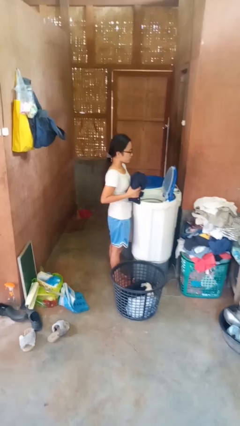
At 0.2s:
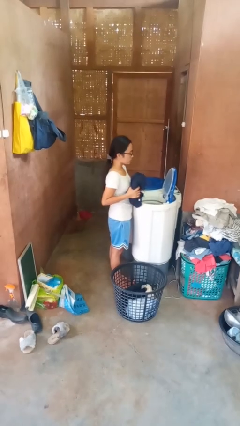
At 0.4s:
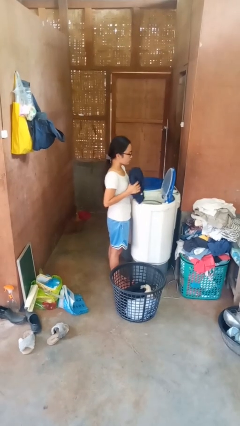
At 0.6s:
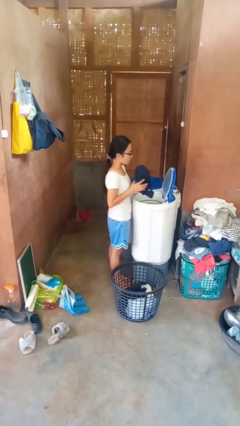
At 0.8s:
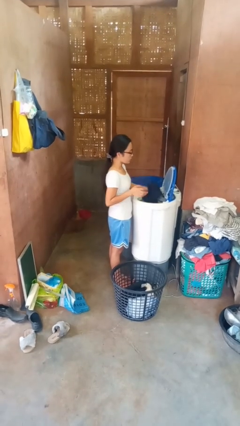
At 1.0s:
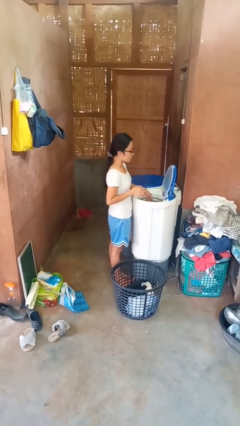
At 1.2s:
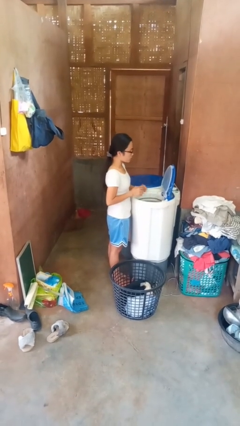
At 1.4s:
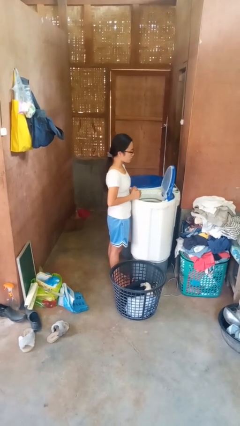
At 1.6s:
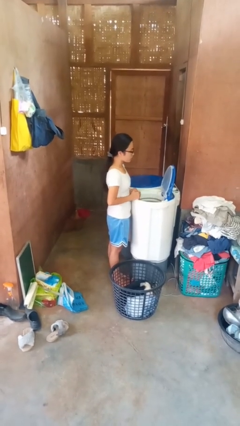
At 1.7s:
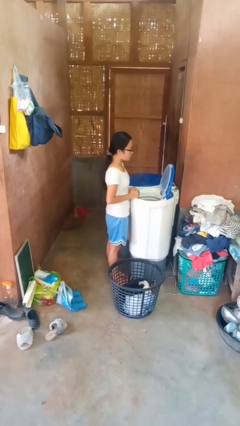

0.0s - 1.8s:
person loads dryer

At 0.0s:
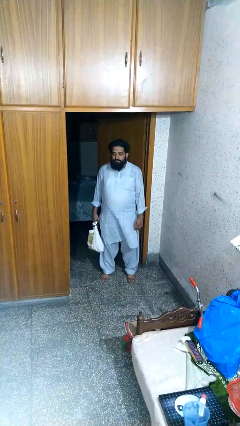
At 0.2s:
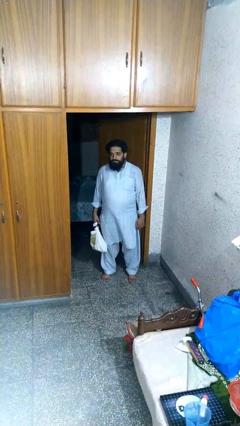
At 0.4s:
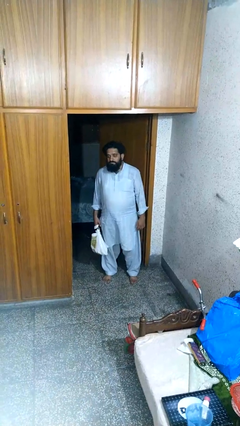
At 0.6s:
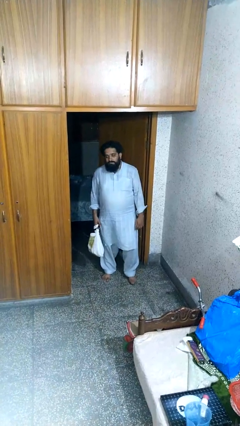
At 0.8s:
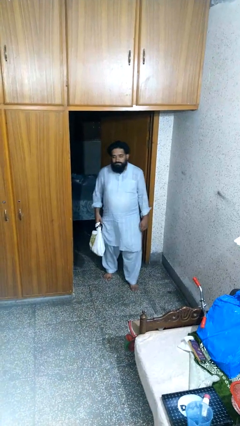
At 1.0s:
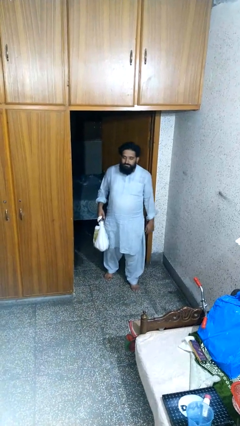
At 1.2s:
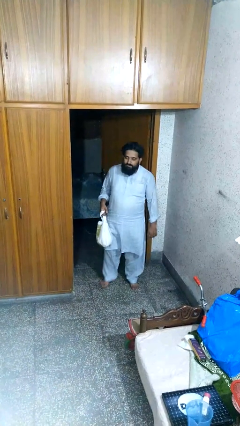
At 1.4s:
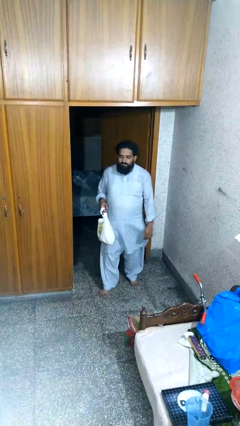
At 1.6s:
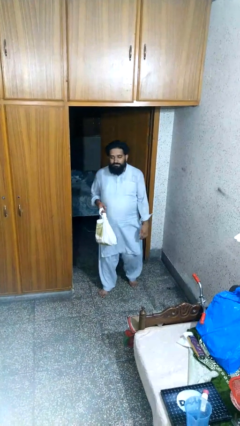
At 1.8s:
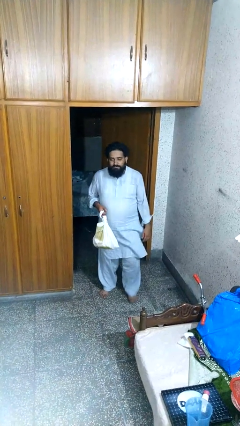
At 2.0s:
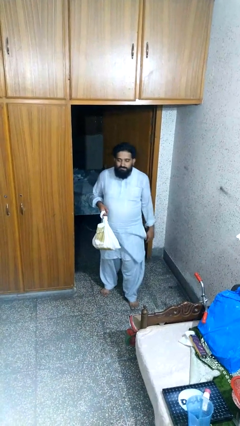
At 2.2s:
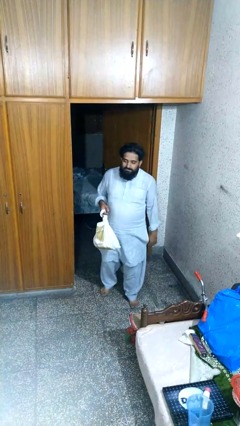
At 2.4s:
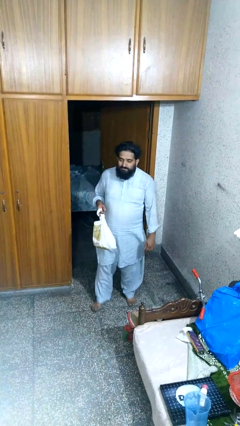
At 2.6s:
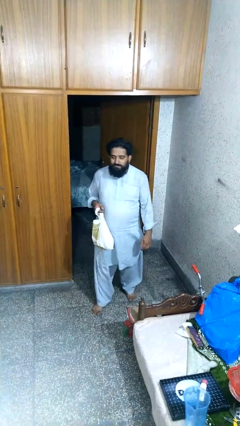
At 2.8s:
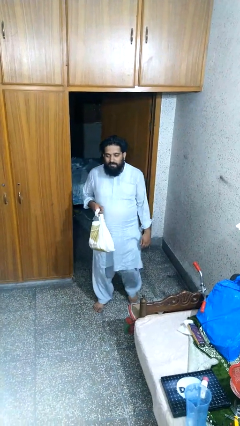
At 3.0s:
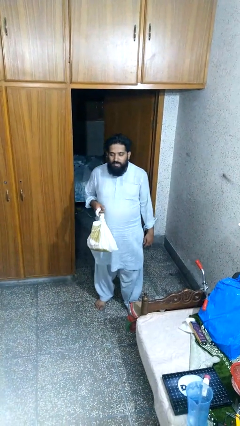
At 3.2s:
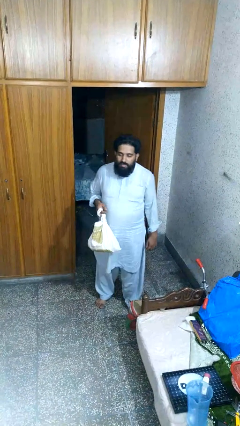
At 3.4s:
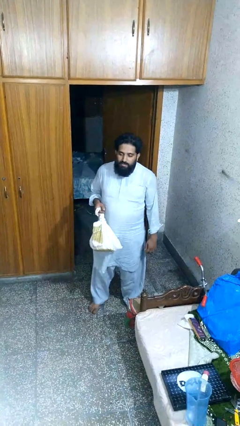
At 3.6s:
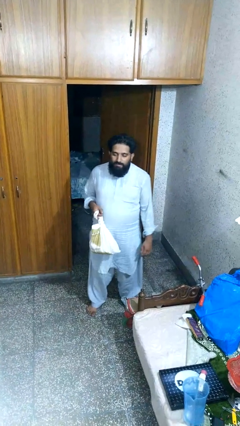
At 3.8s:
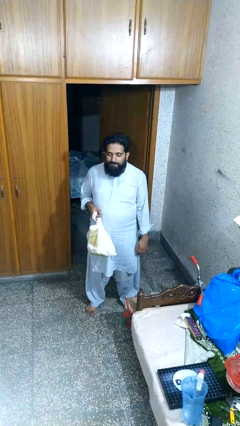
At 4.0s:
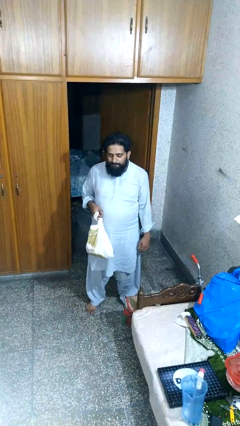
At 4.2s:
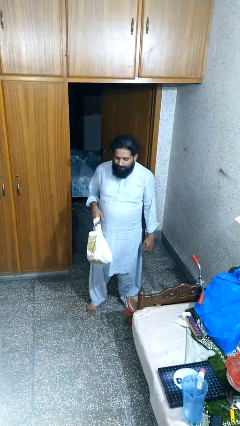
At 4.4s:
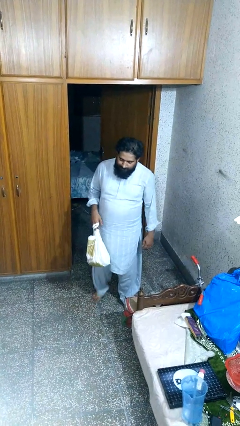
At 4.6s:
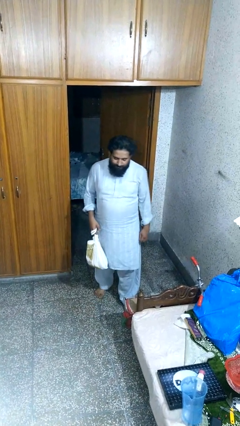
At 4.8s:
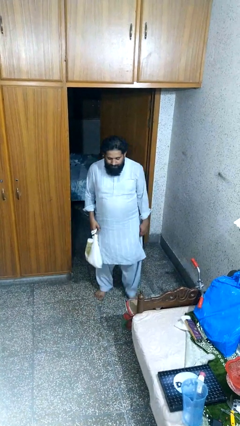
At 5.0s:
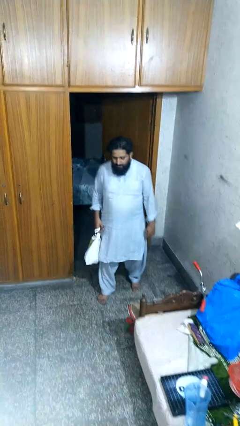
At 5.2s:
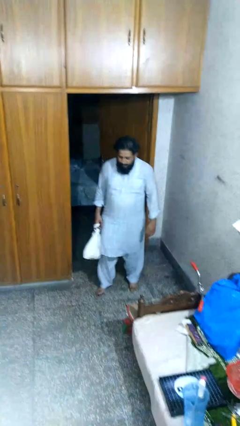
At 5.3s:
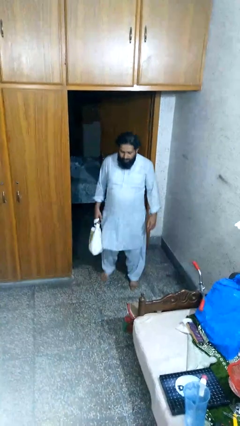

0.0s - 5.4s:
person carries groceries

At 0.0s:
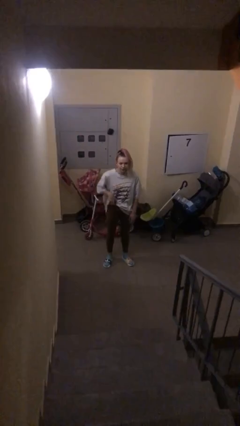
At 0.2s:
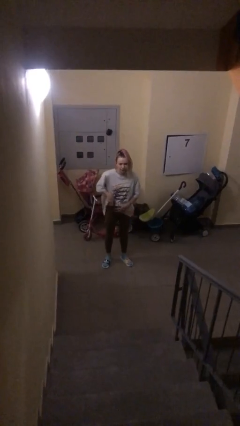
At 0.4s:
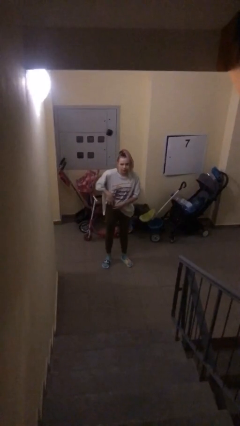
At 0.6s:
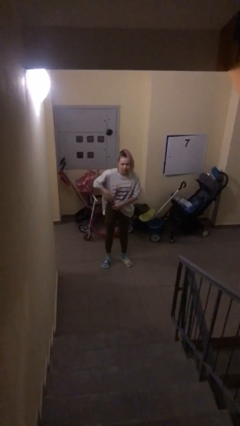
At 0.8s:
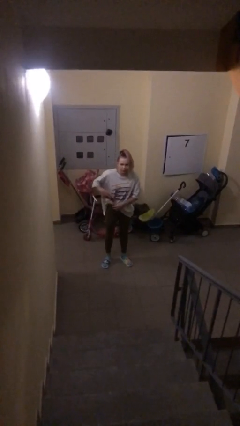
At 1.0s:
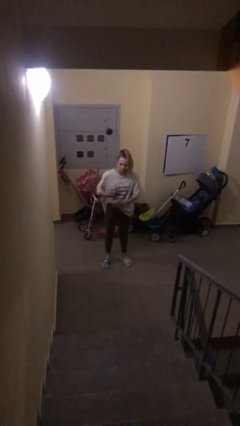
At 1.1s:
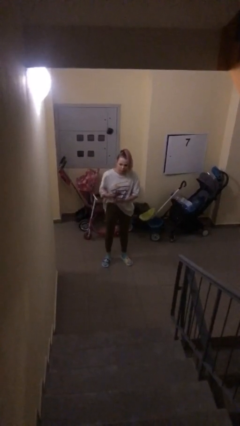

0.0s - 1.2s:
person takes phone from pocket

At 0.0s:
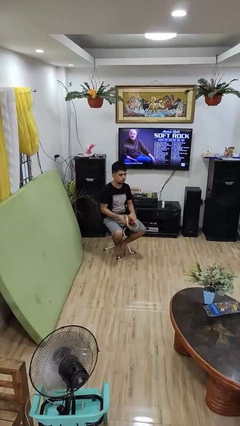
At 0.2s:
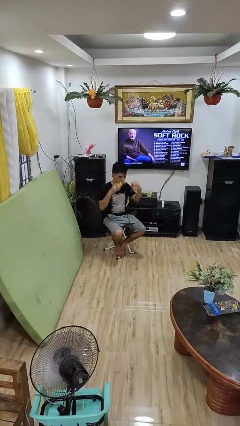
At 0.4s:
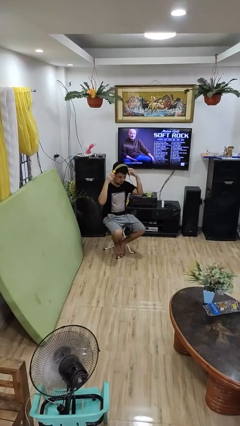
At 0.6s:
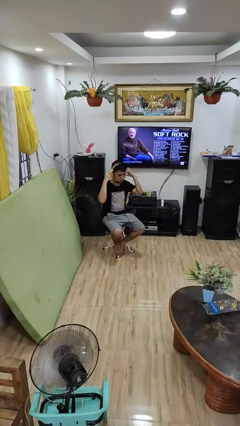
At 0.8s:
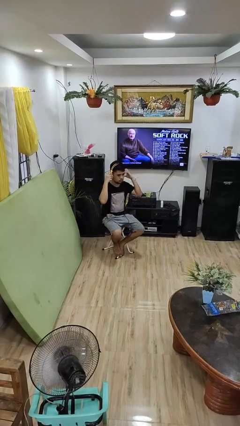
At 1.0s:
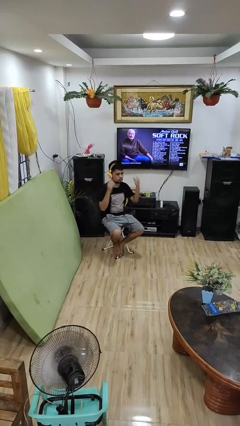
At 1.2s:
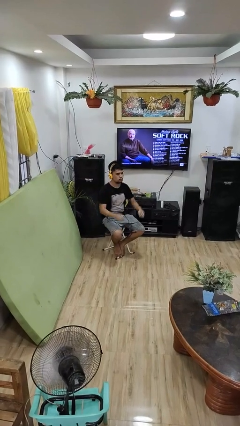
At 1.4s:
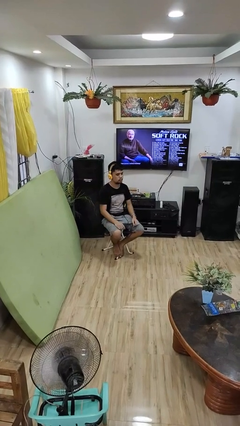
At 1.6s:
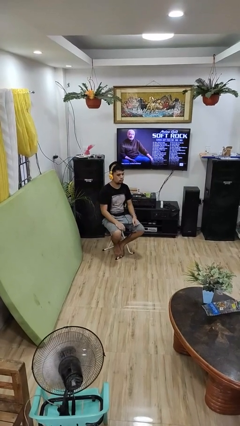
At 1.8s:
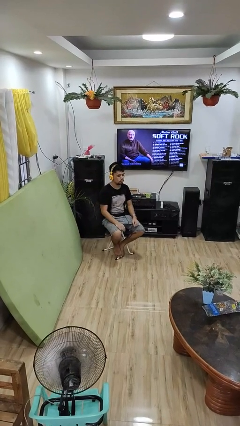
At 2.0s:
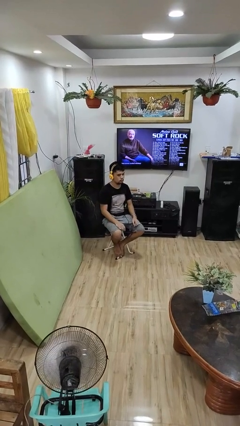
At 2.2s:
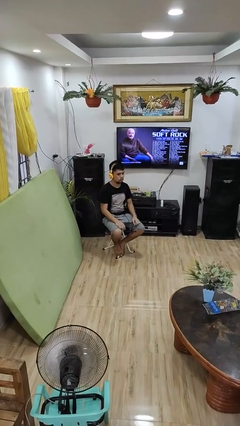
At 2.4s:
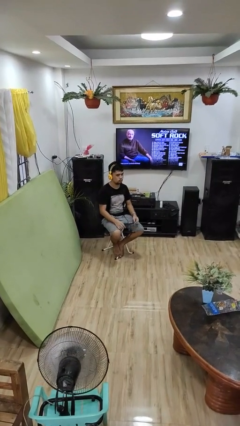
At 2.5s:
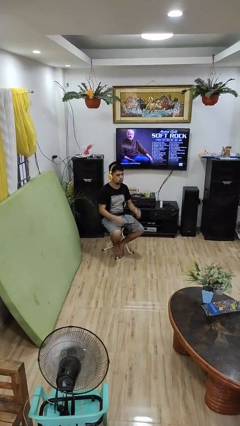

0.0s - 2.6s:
person puts on headphones

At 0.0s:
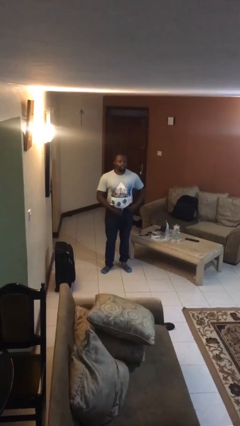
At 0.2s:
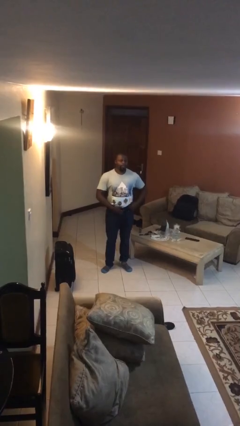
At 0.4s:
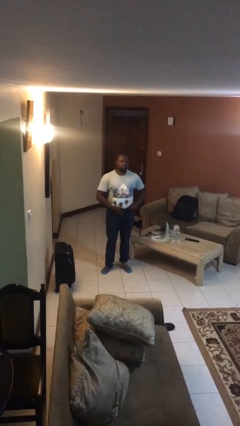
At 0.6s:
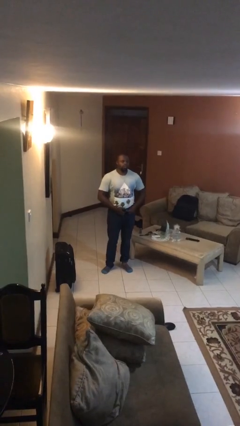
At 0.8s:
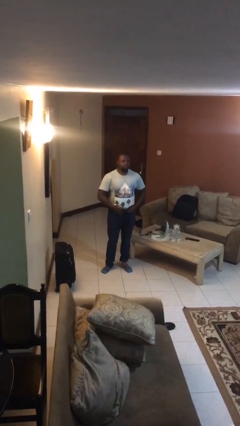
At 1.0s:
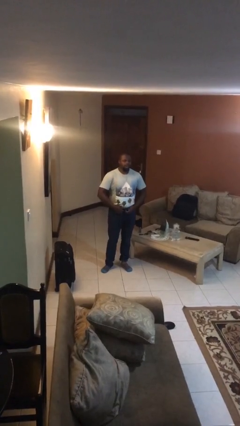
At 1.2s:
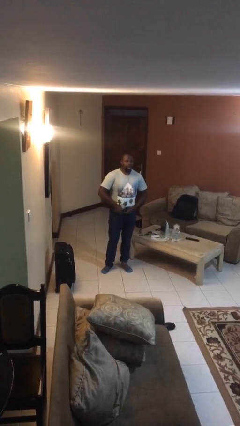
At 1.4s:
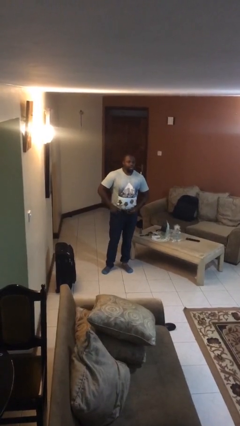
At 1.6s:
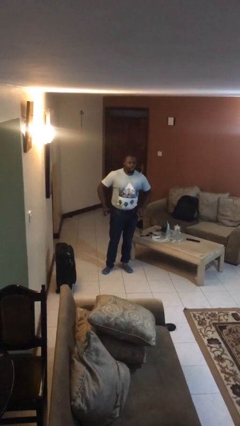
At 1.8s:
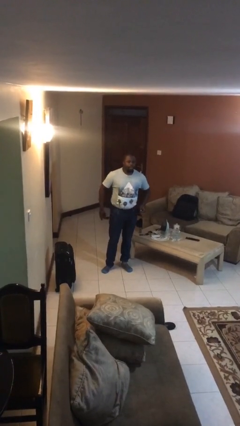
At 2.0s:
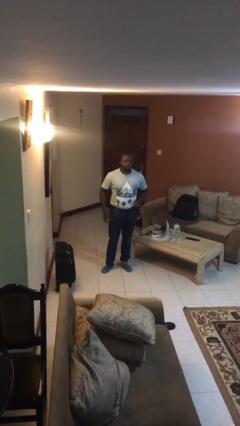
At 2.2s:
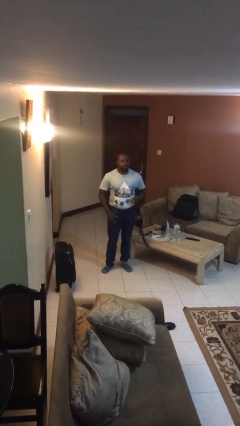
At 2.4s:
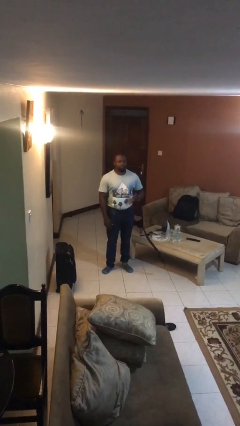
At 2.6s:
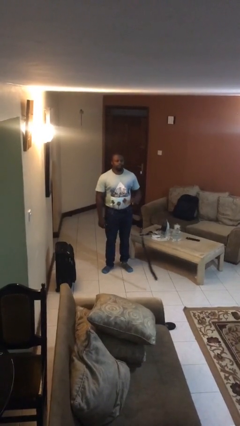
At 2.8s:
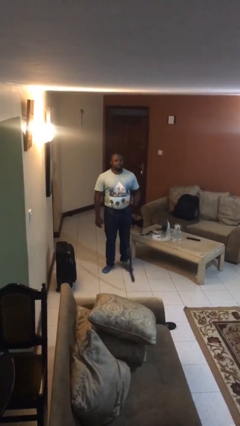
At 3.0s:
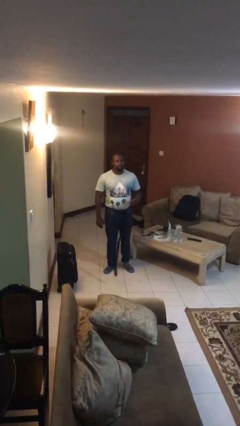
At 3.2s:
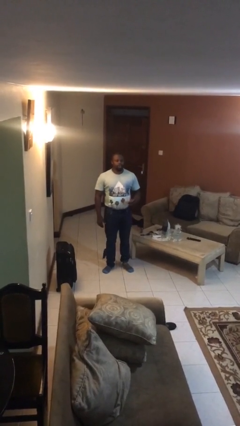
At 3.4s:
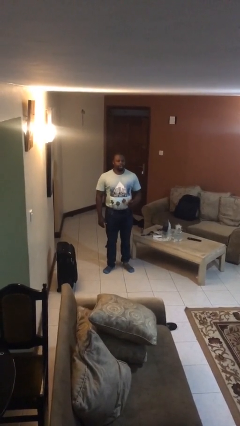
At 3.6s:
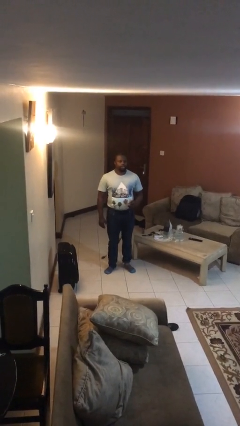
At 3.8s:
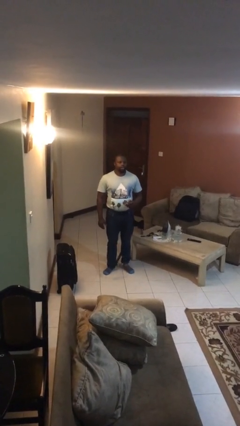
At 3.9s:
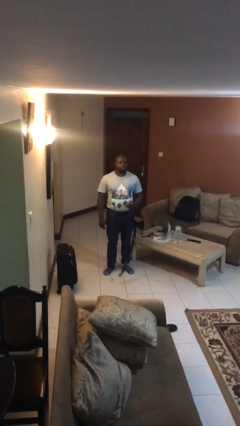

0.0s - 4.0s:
person takes off belt

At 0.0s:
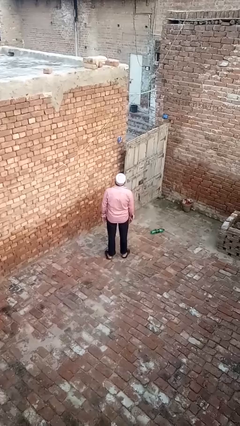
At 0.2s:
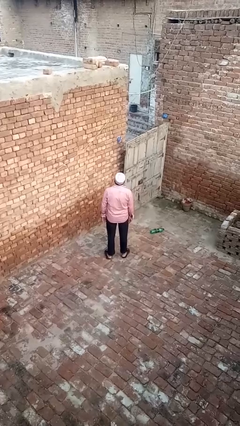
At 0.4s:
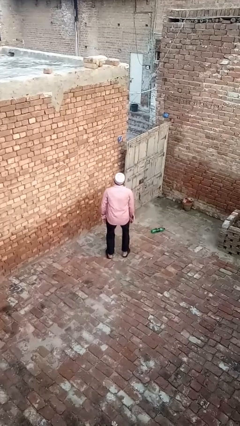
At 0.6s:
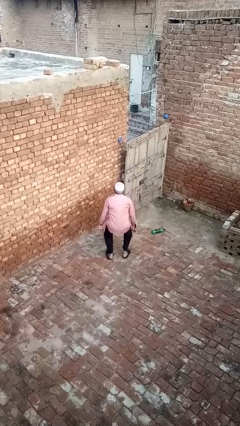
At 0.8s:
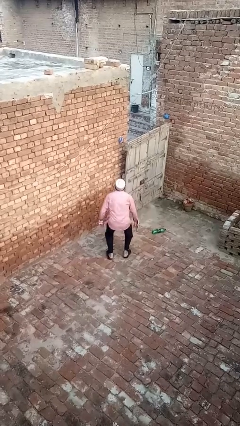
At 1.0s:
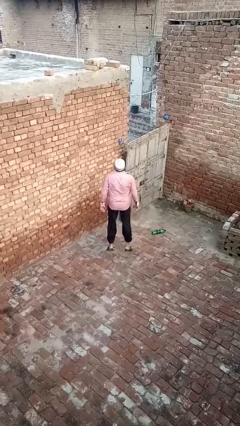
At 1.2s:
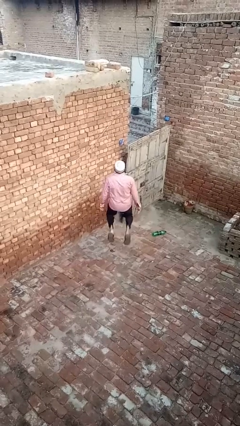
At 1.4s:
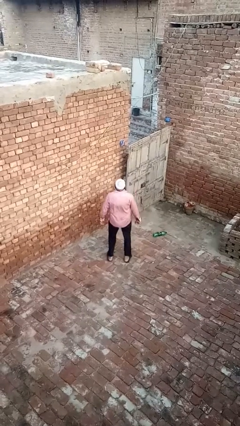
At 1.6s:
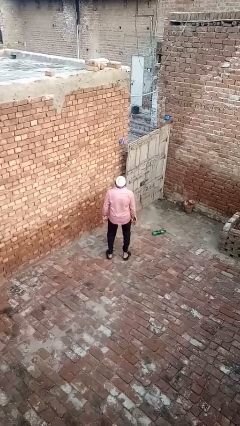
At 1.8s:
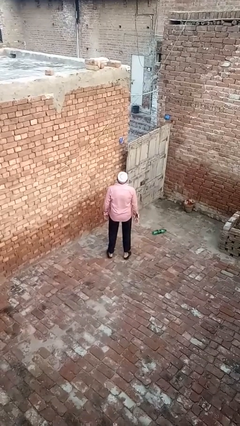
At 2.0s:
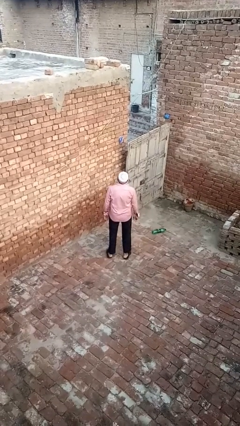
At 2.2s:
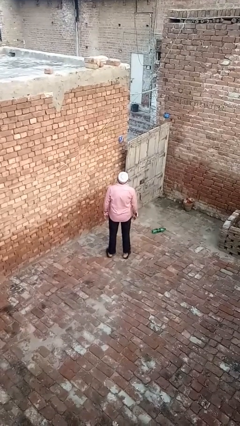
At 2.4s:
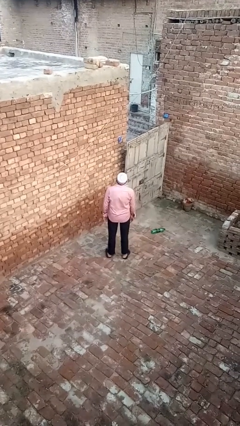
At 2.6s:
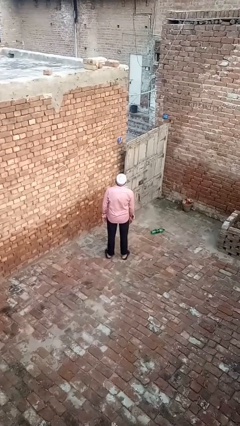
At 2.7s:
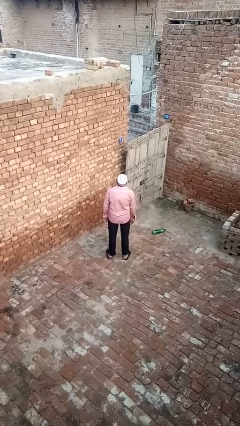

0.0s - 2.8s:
person jumps
